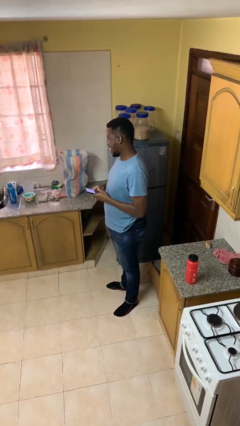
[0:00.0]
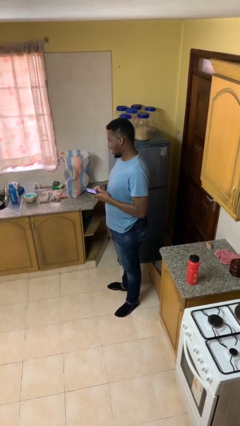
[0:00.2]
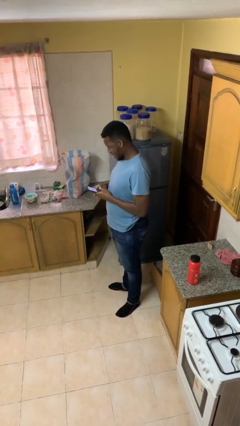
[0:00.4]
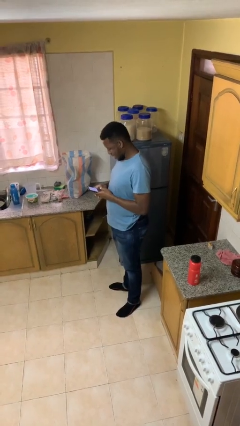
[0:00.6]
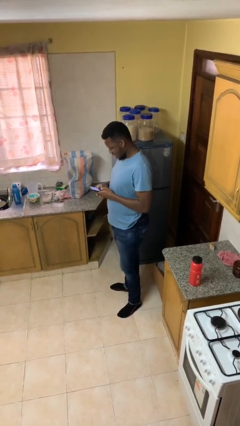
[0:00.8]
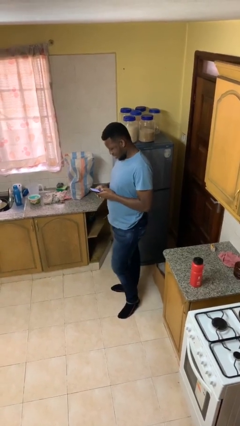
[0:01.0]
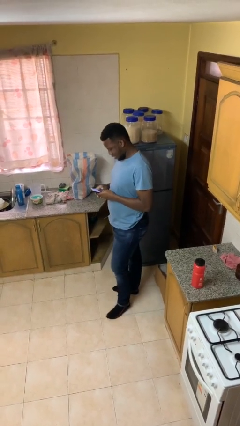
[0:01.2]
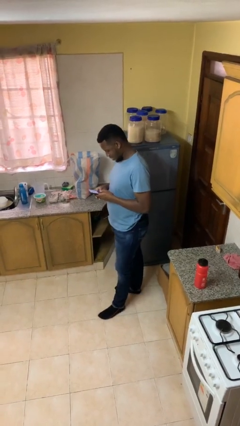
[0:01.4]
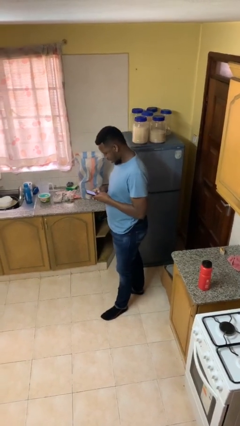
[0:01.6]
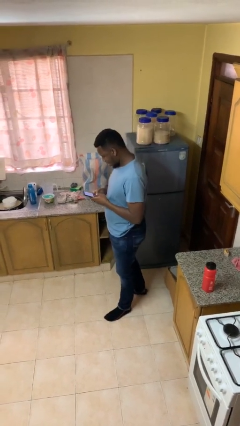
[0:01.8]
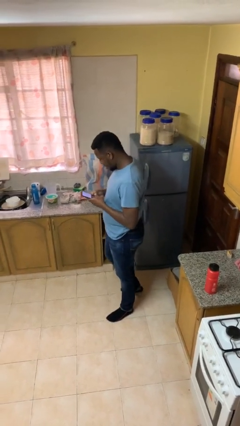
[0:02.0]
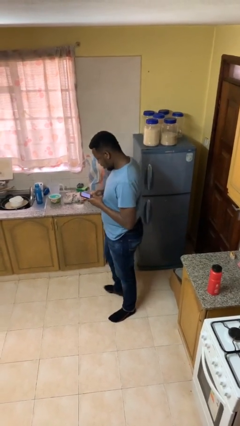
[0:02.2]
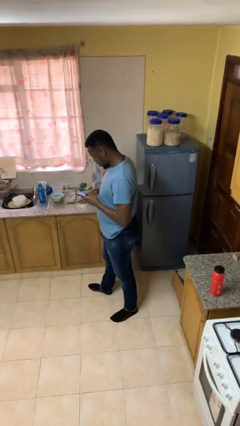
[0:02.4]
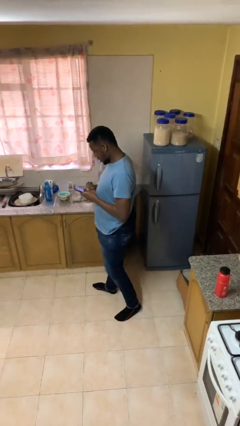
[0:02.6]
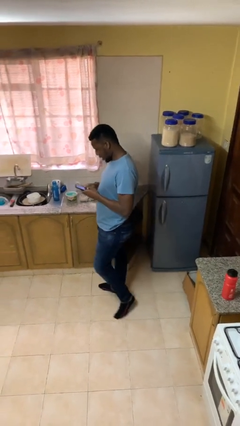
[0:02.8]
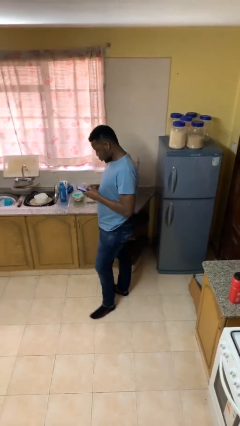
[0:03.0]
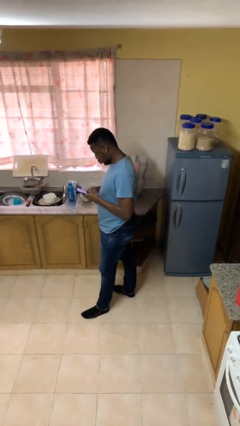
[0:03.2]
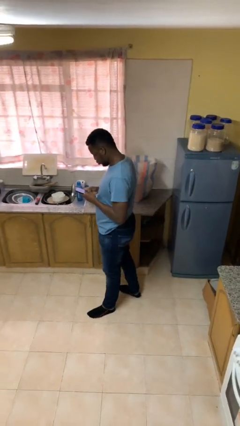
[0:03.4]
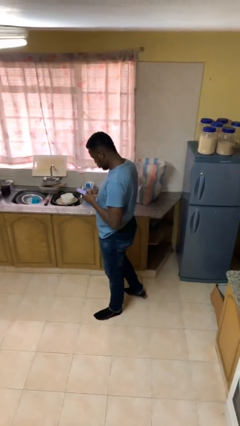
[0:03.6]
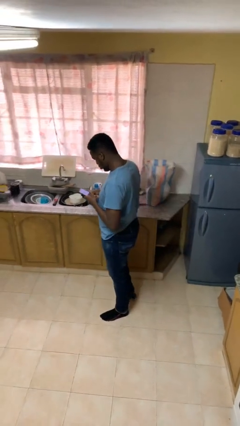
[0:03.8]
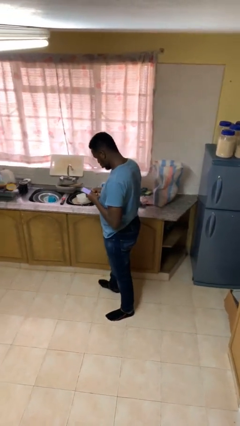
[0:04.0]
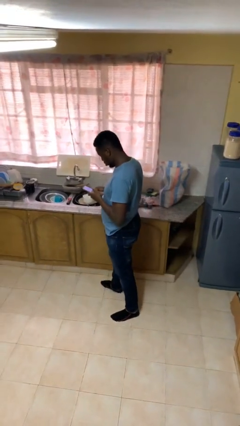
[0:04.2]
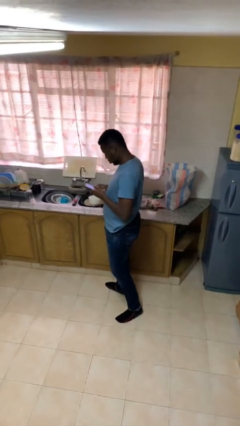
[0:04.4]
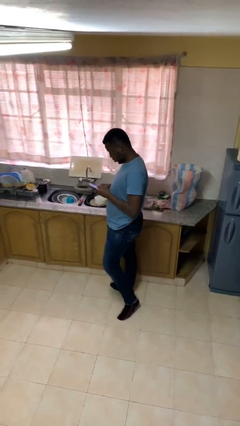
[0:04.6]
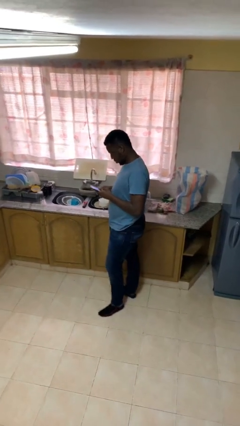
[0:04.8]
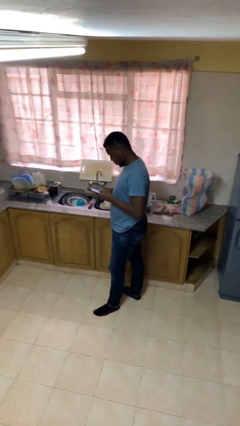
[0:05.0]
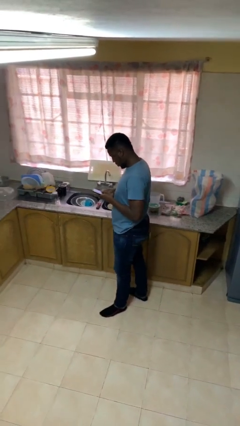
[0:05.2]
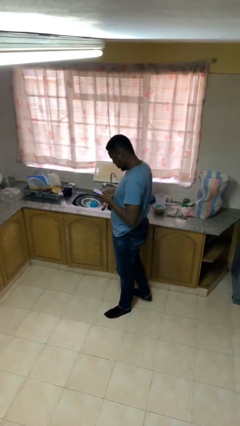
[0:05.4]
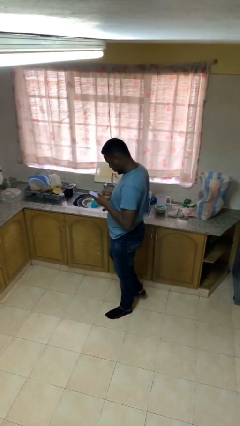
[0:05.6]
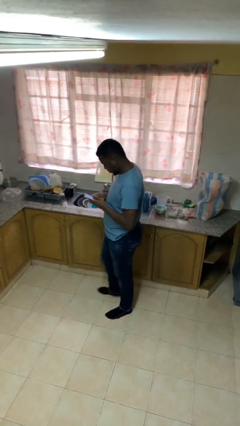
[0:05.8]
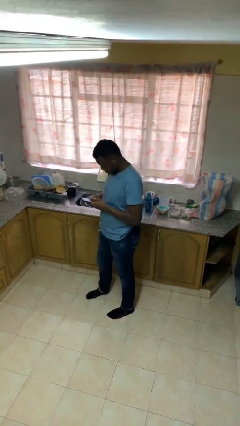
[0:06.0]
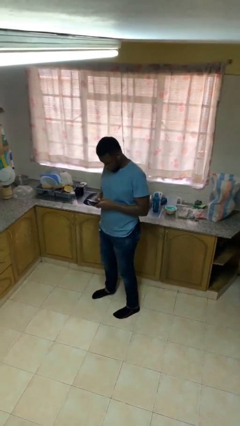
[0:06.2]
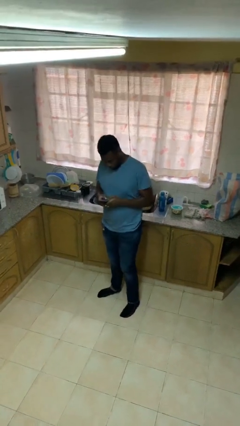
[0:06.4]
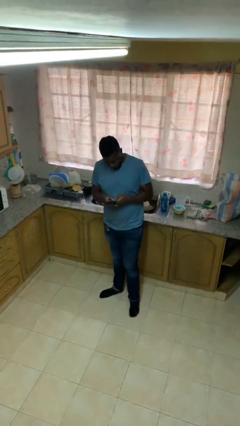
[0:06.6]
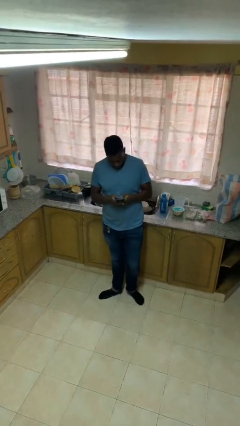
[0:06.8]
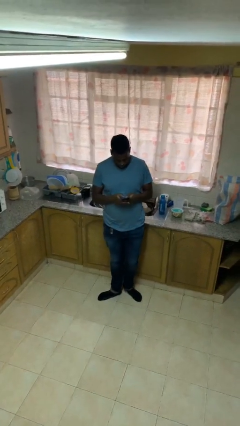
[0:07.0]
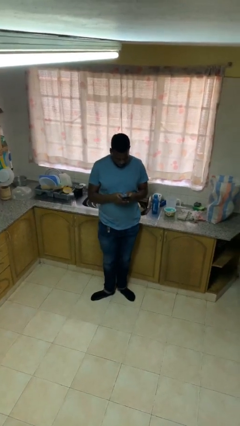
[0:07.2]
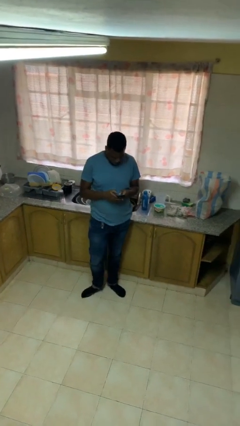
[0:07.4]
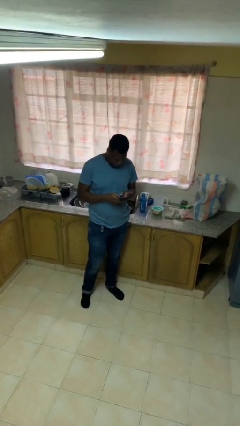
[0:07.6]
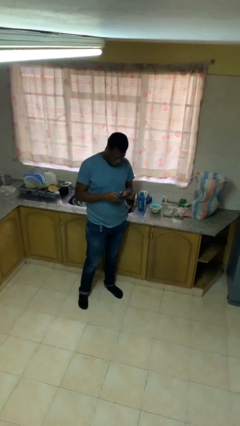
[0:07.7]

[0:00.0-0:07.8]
person texts on phone

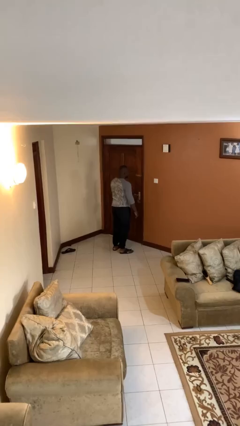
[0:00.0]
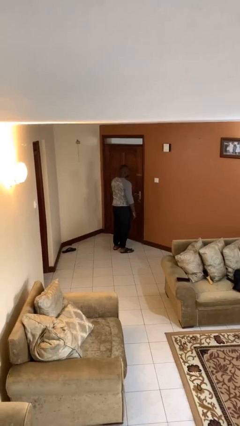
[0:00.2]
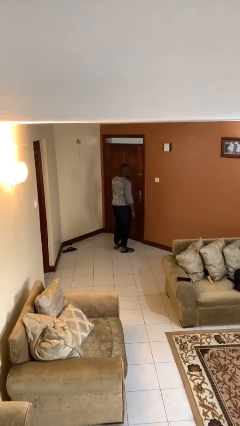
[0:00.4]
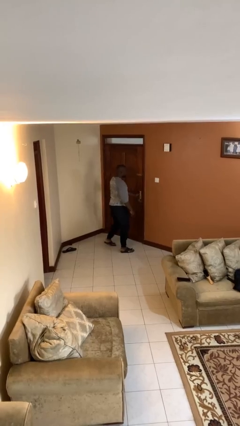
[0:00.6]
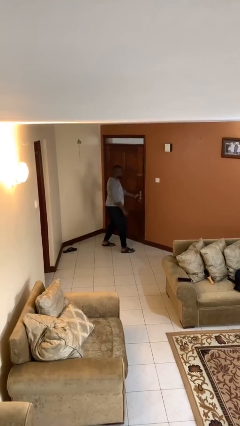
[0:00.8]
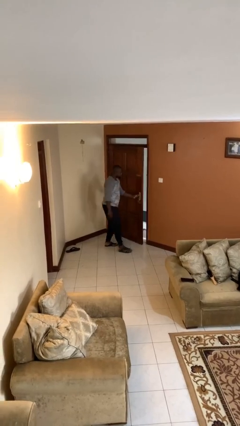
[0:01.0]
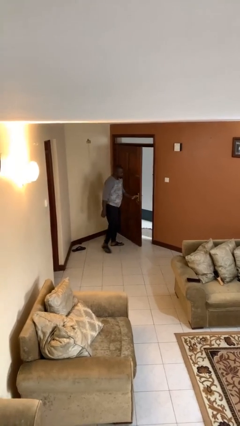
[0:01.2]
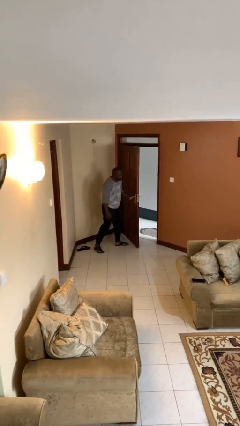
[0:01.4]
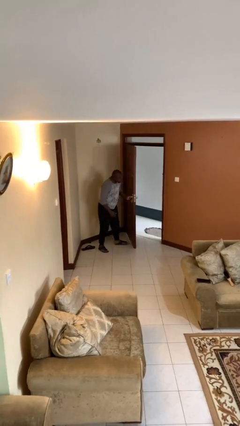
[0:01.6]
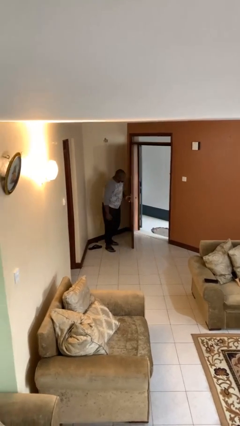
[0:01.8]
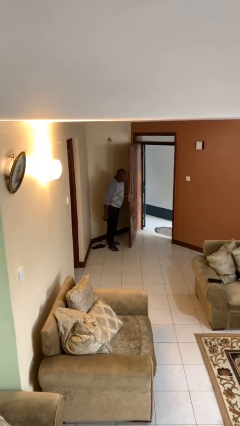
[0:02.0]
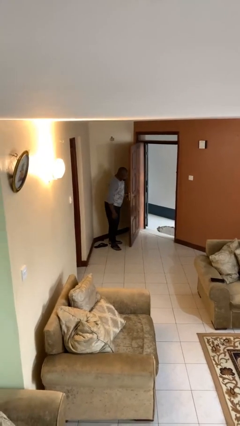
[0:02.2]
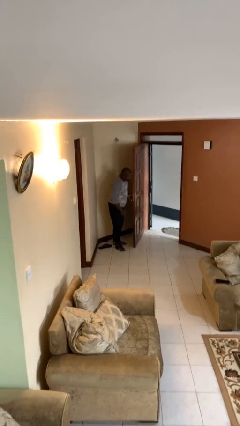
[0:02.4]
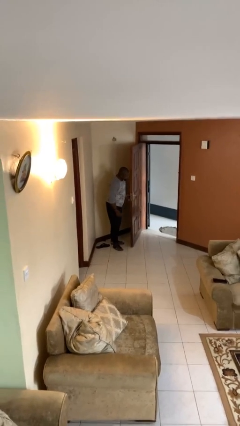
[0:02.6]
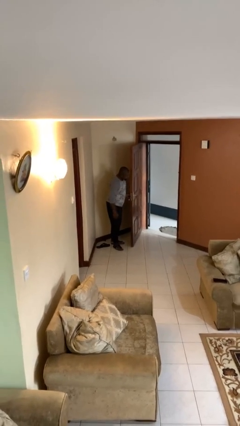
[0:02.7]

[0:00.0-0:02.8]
person opens facility door

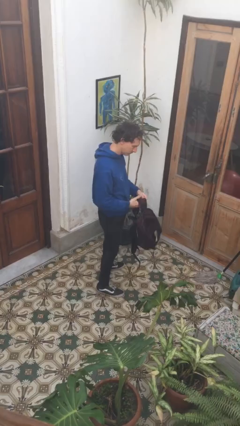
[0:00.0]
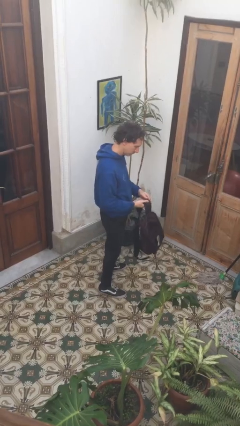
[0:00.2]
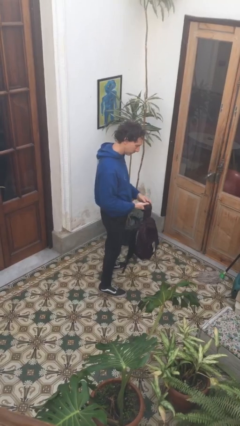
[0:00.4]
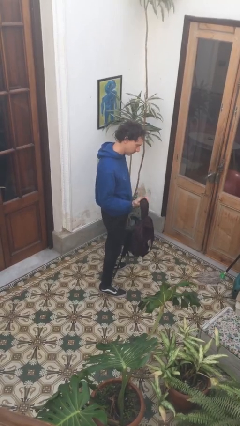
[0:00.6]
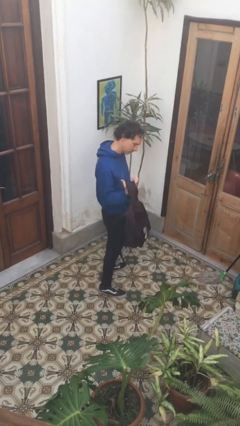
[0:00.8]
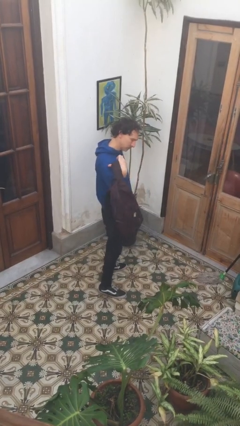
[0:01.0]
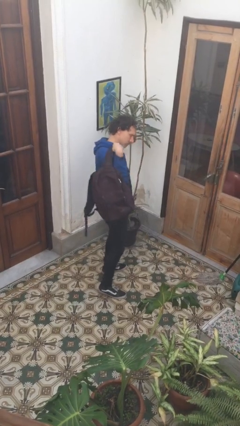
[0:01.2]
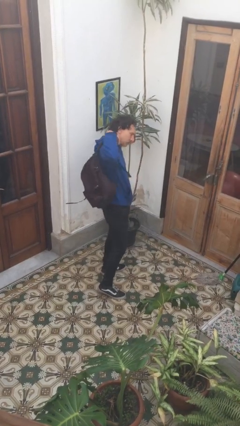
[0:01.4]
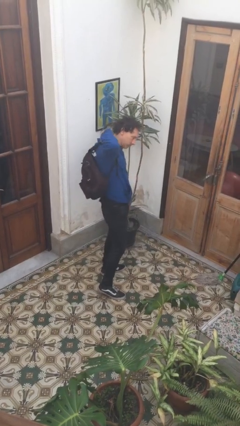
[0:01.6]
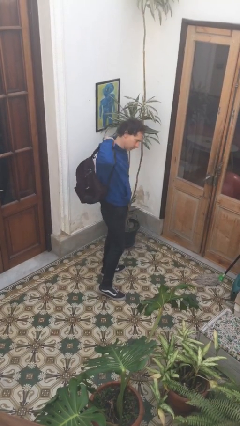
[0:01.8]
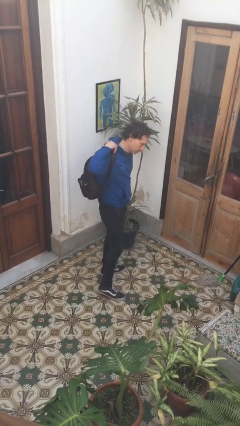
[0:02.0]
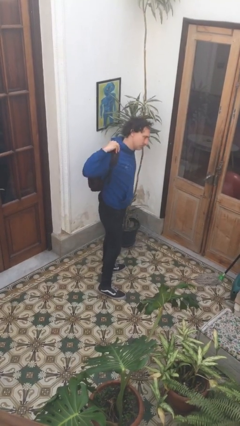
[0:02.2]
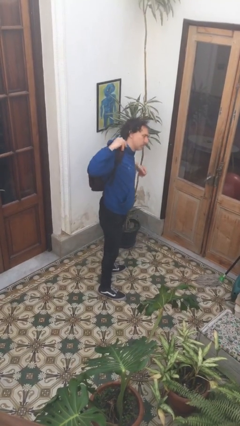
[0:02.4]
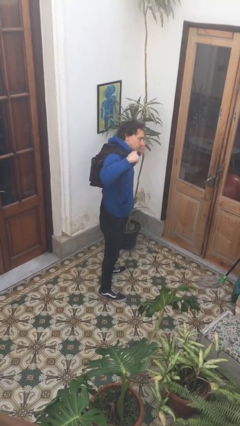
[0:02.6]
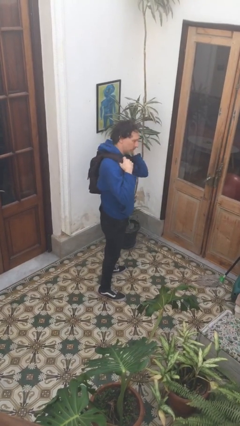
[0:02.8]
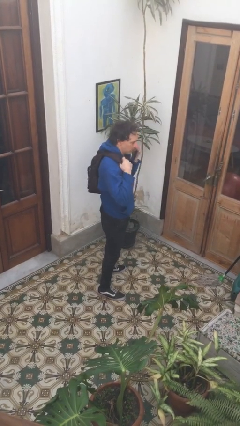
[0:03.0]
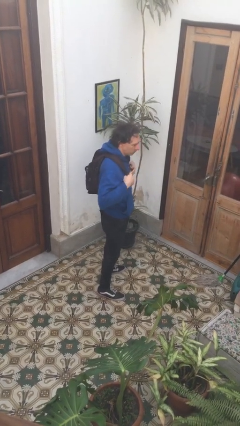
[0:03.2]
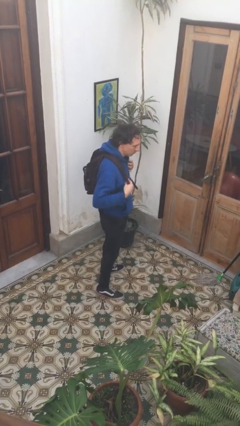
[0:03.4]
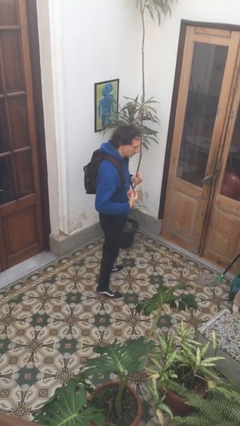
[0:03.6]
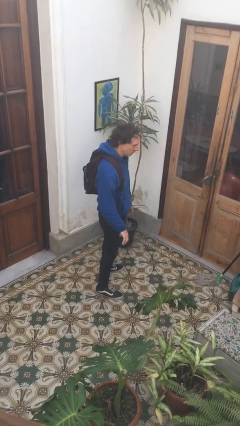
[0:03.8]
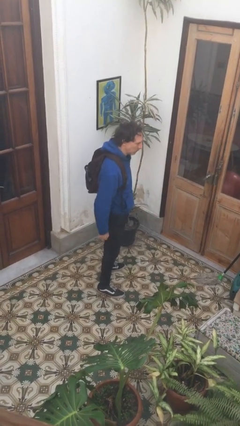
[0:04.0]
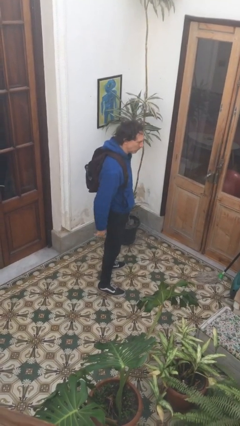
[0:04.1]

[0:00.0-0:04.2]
person puts on backpack

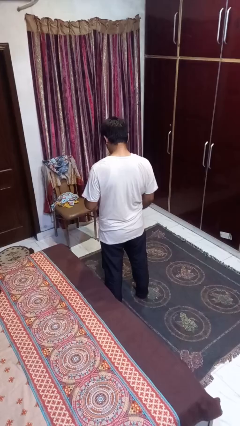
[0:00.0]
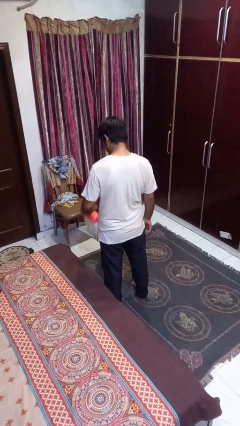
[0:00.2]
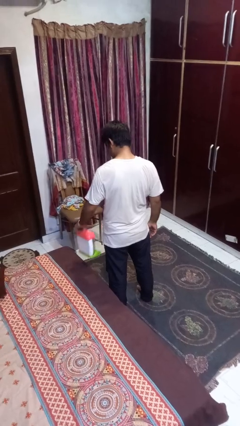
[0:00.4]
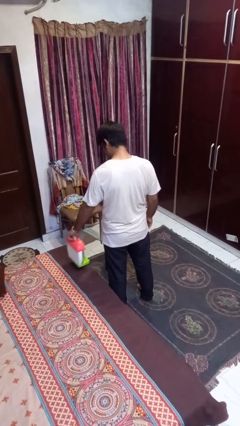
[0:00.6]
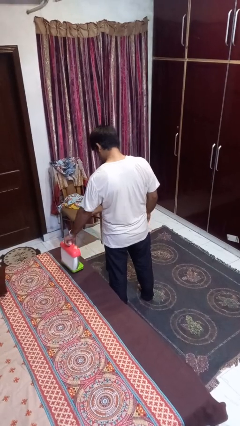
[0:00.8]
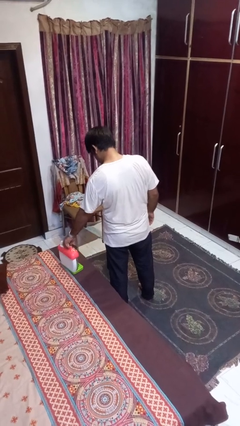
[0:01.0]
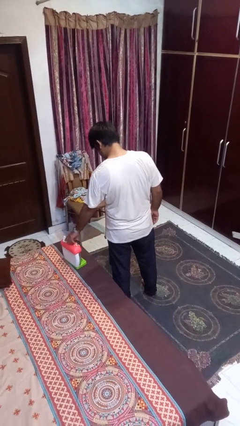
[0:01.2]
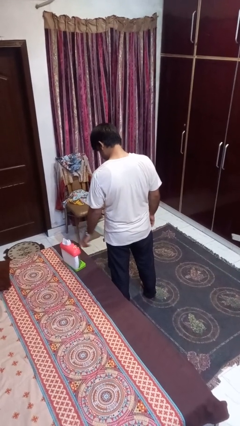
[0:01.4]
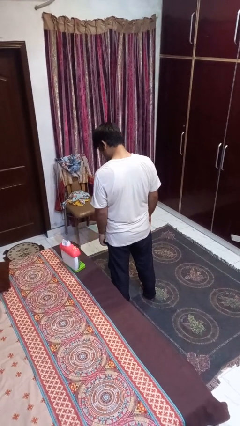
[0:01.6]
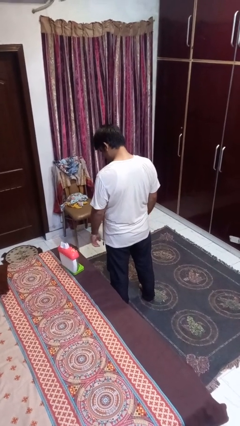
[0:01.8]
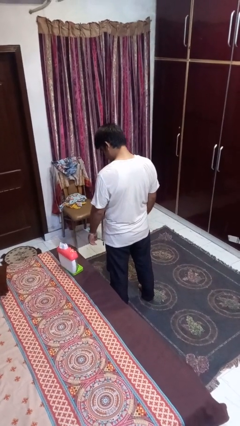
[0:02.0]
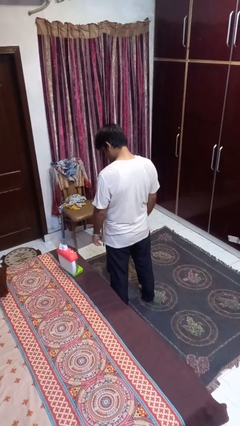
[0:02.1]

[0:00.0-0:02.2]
person puts down object on bed

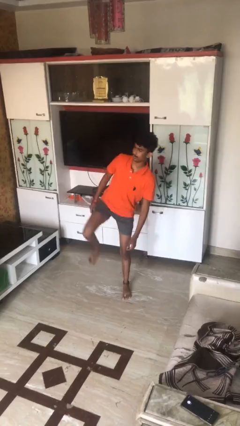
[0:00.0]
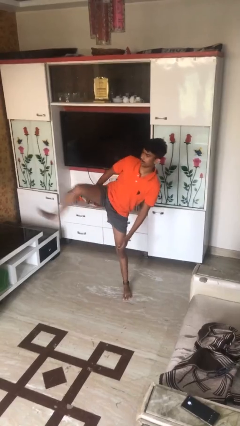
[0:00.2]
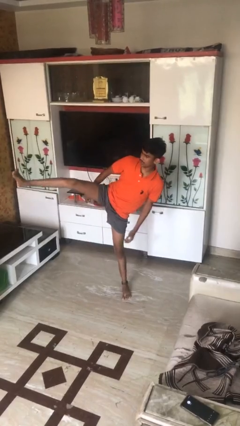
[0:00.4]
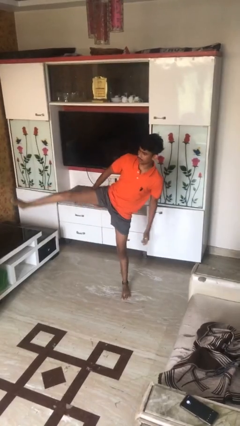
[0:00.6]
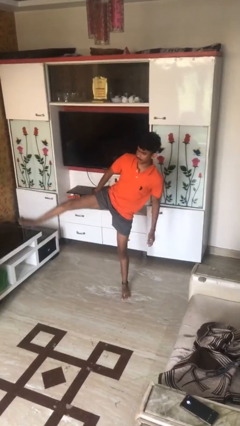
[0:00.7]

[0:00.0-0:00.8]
person karate kicks
